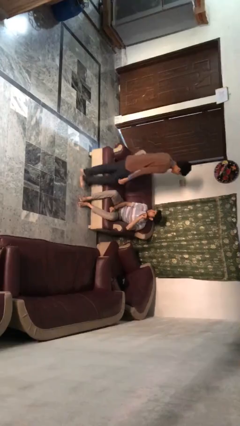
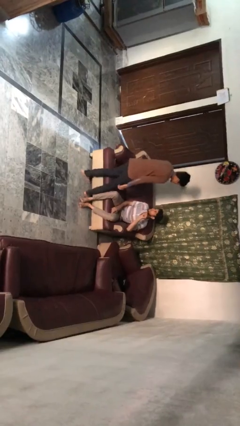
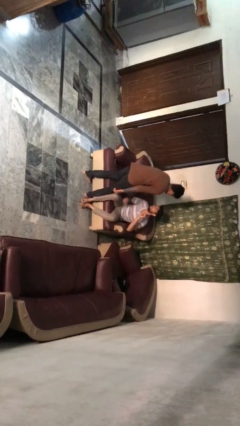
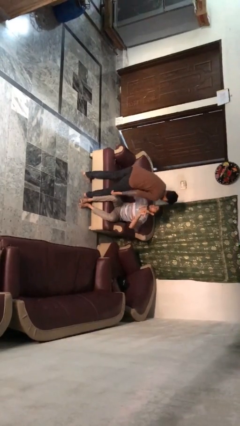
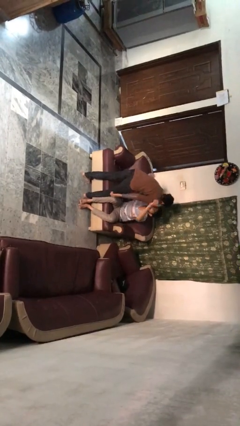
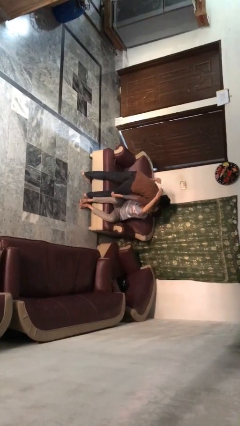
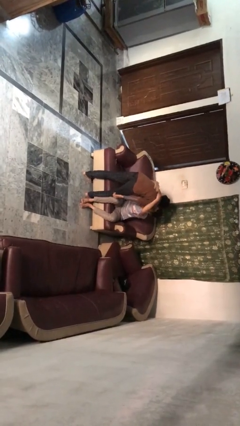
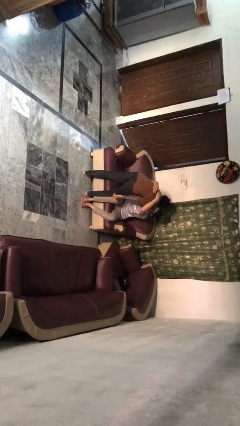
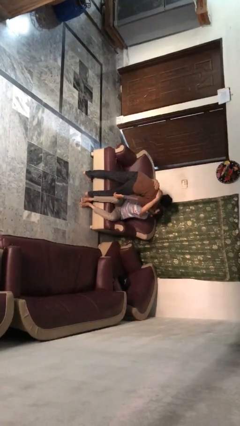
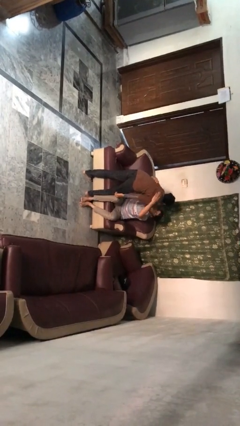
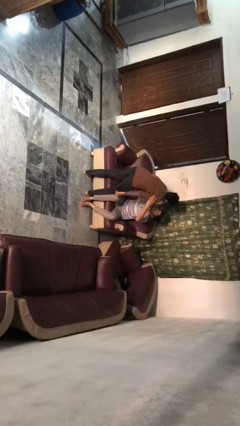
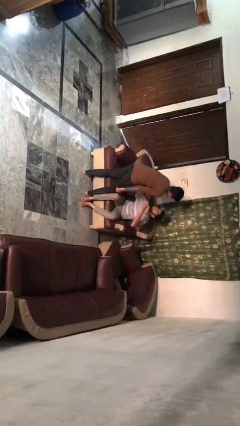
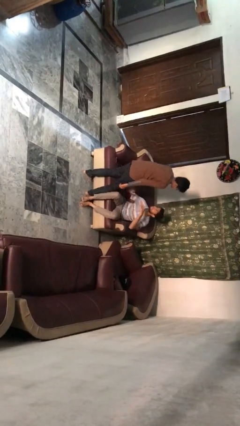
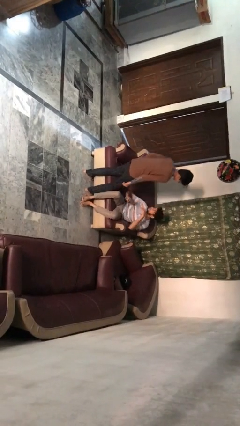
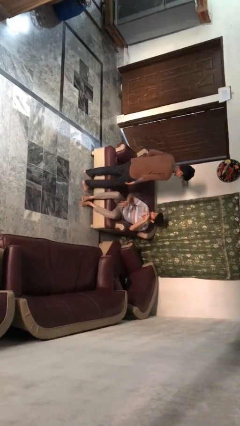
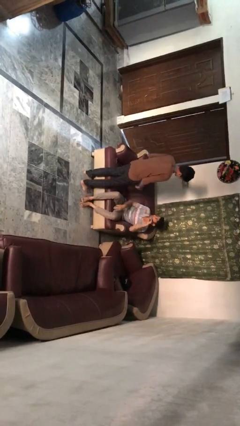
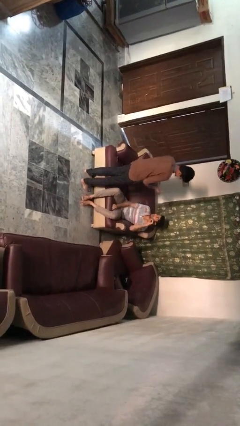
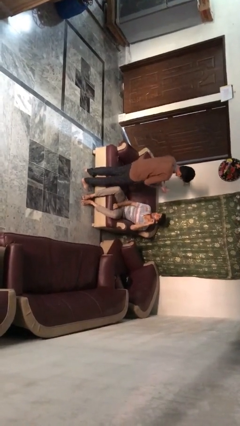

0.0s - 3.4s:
person embraces person

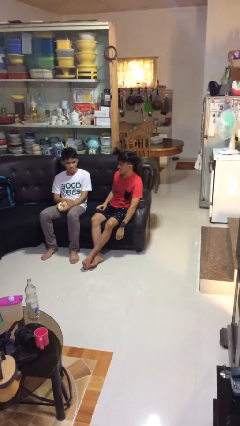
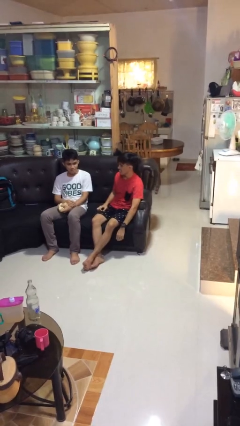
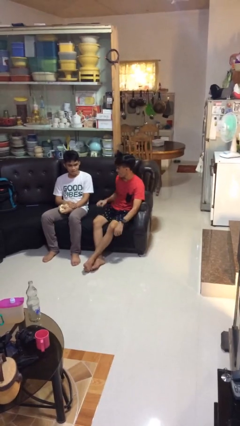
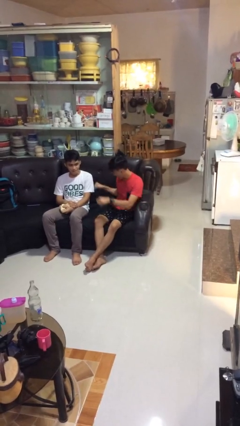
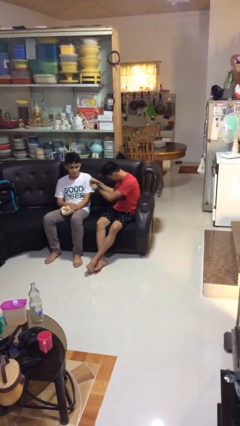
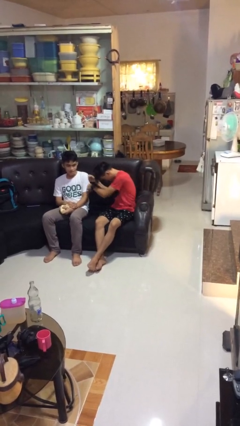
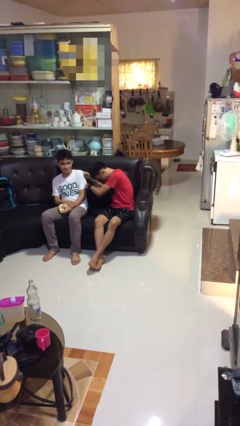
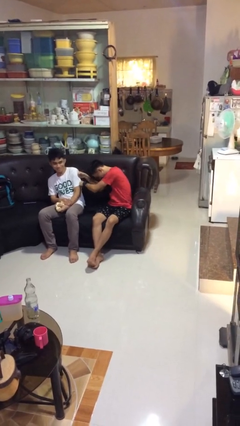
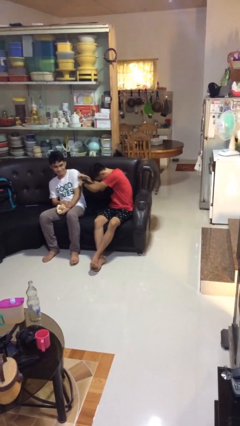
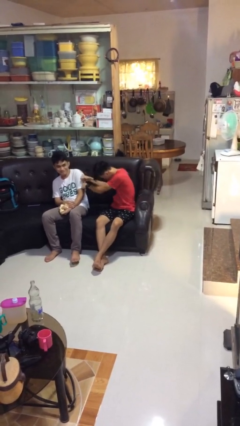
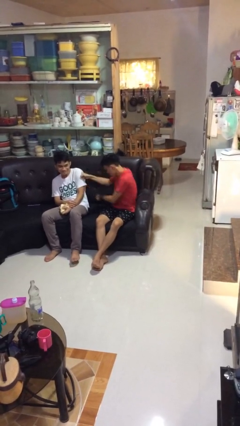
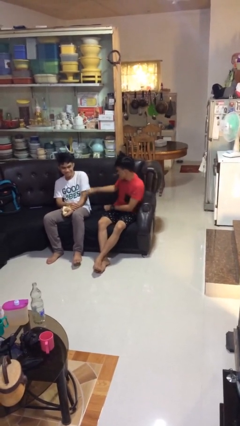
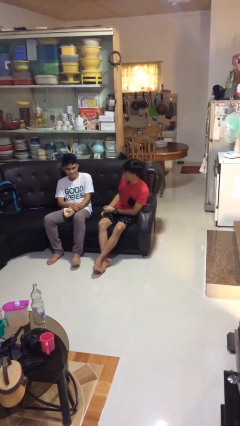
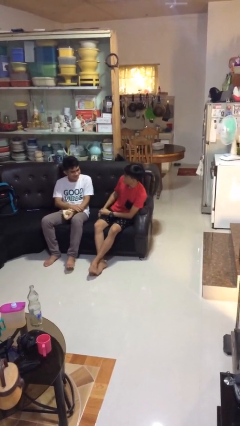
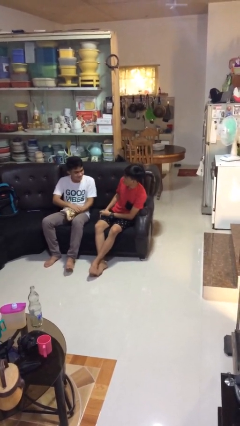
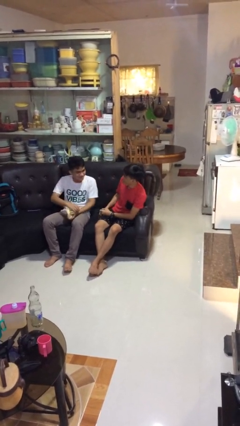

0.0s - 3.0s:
person pounds shoulders of person

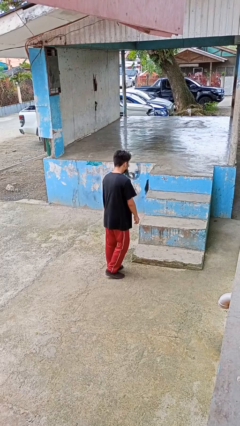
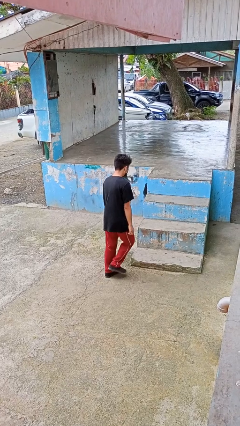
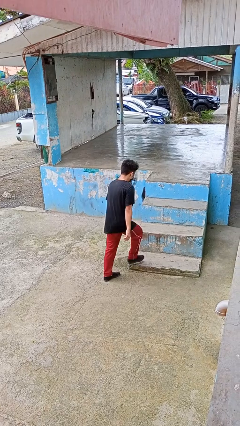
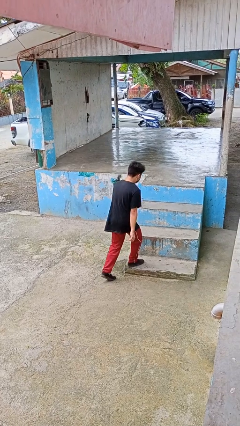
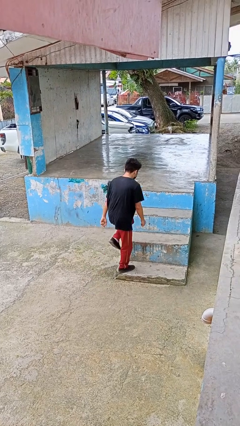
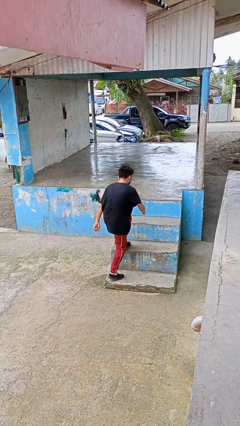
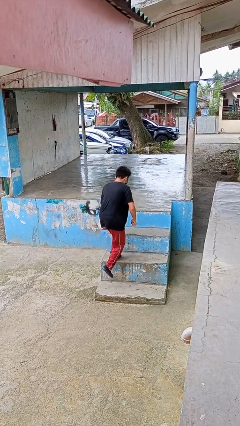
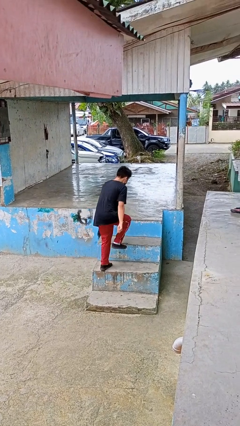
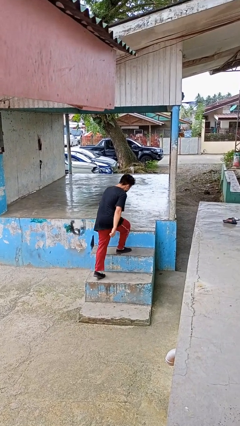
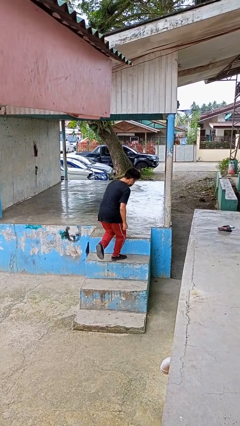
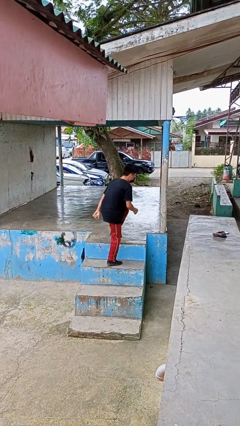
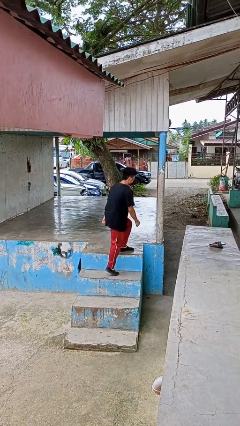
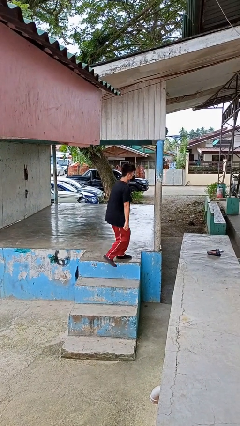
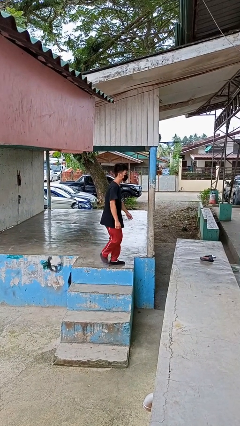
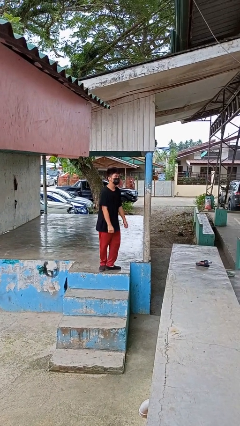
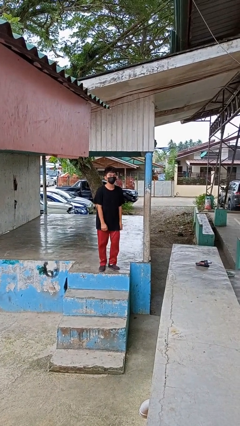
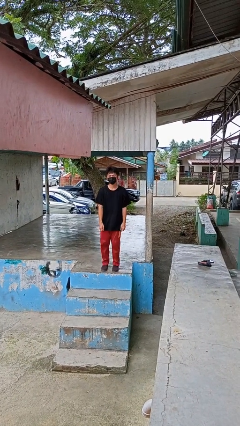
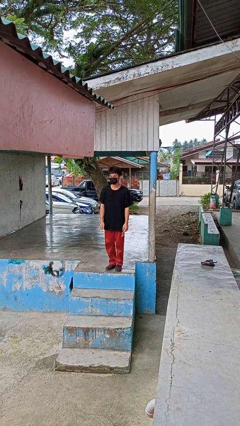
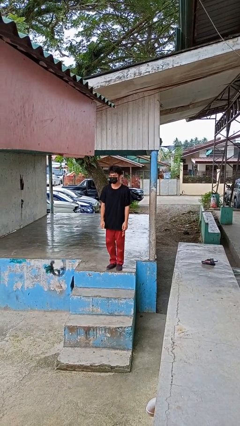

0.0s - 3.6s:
person climbs up stairs

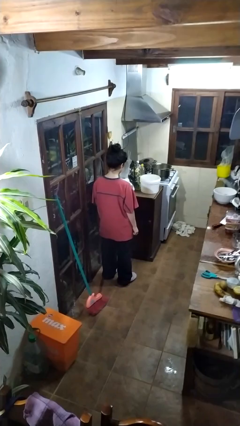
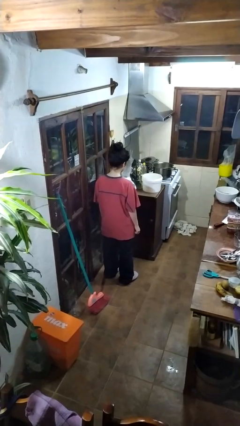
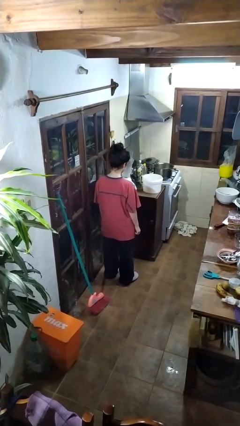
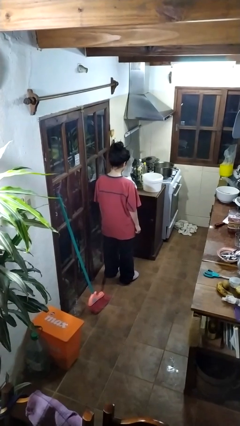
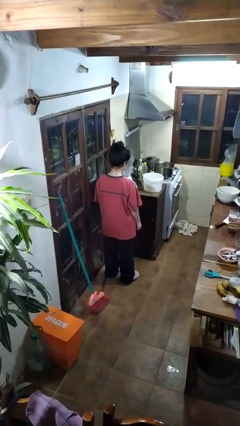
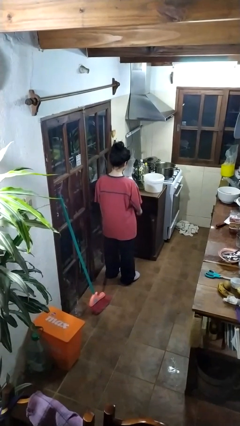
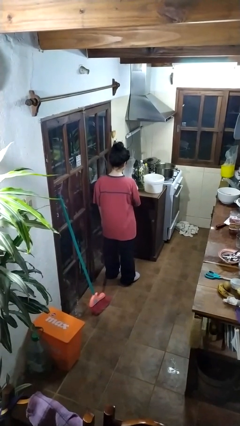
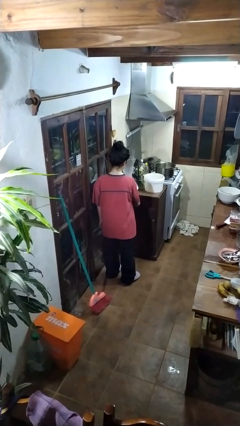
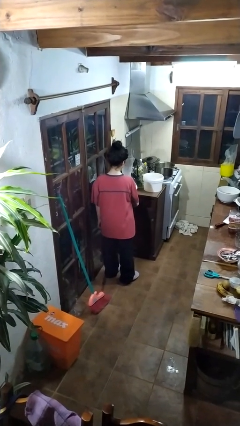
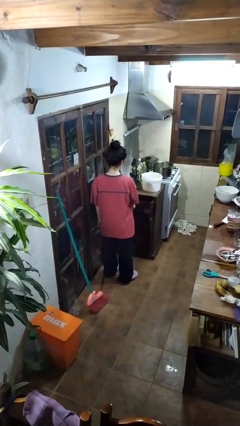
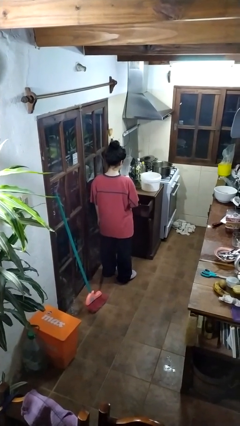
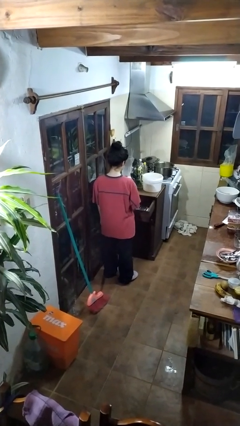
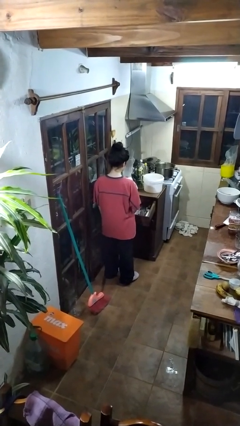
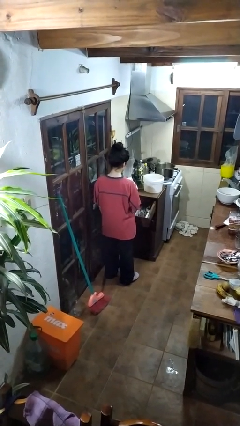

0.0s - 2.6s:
person opens kitchen drawer

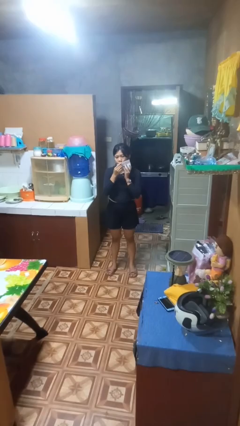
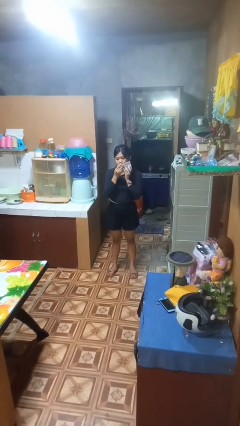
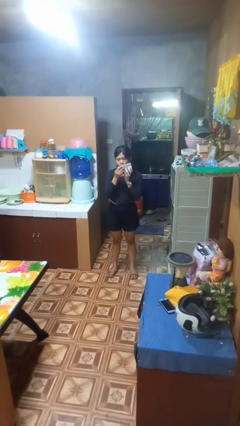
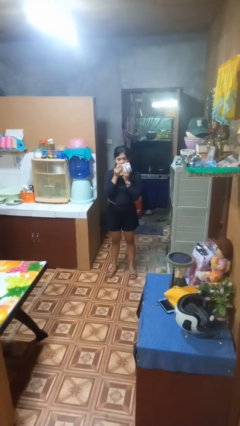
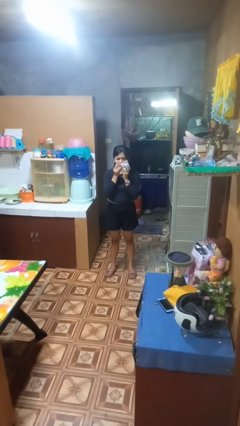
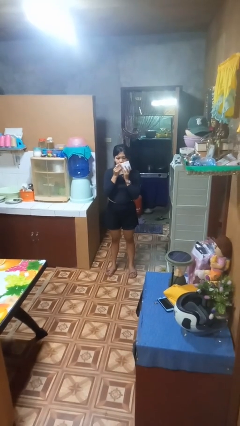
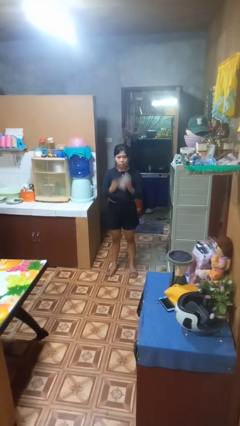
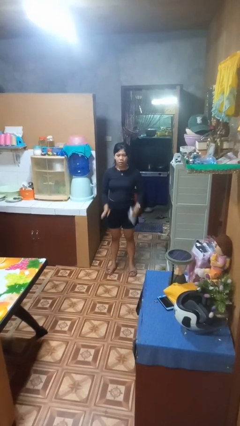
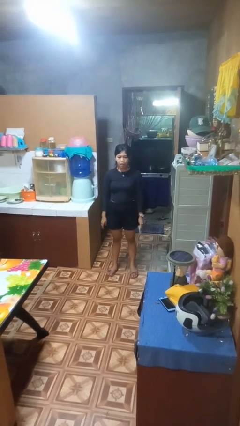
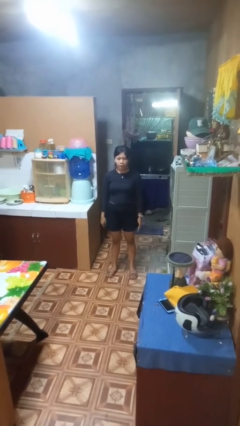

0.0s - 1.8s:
person wipes mouth with napkin

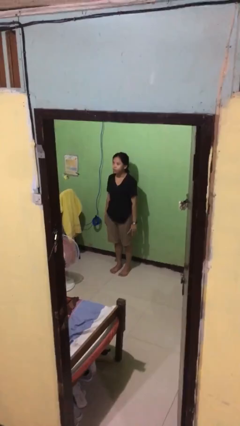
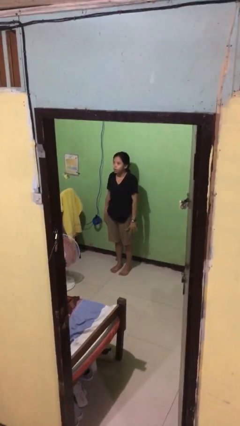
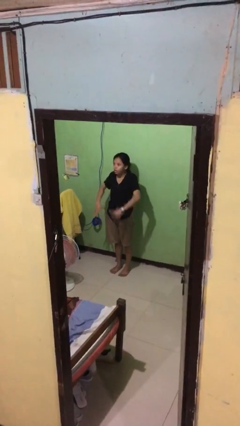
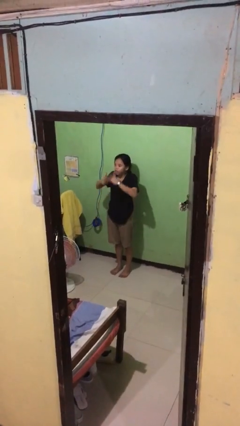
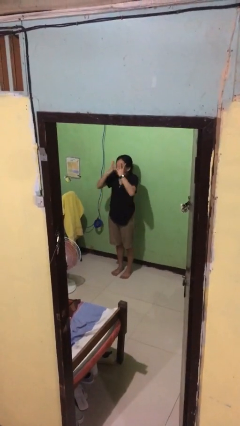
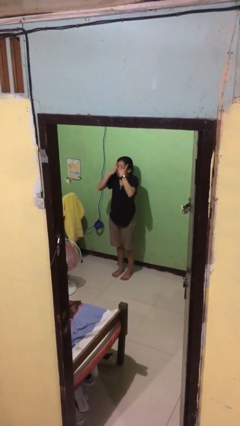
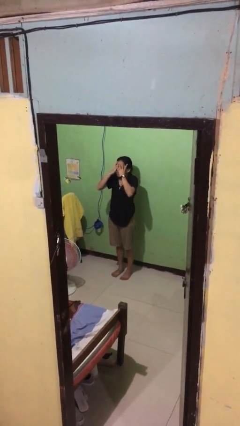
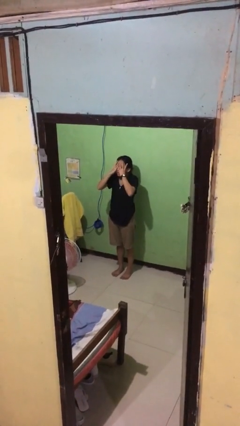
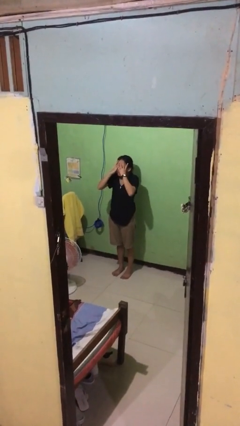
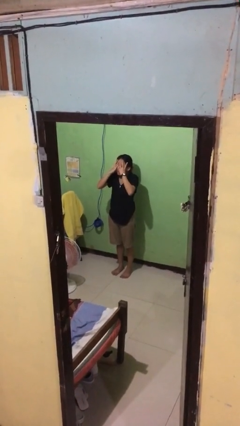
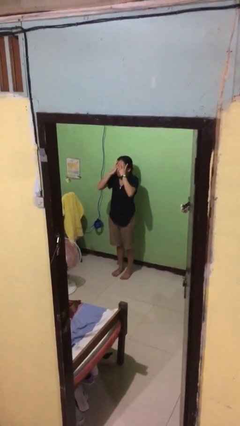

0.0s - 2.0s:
person covers face with hands

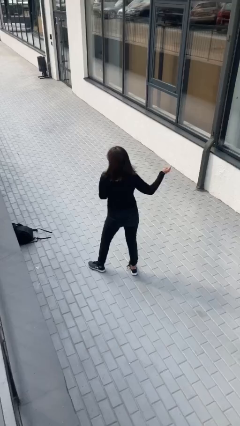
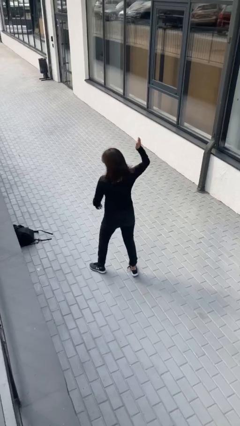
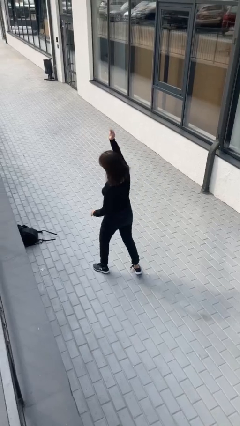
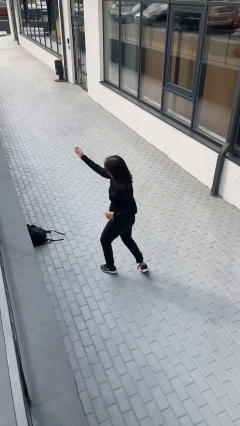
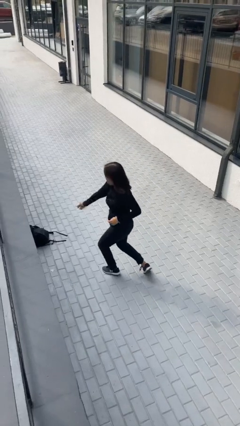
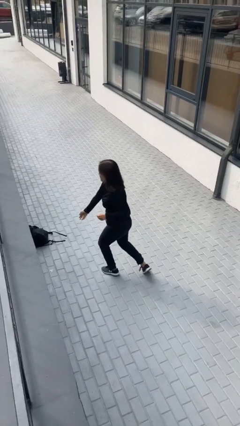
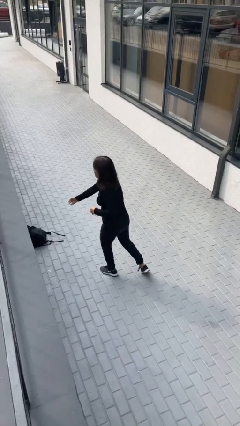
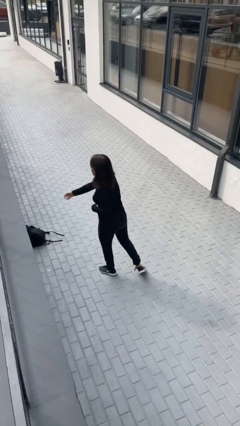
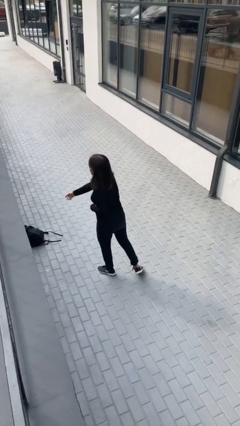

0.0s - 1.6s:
person karate chop
